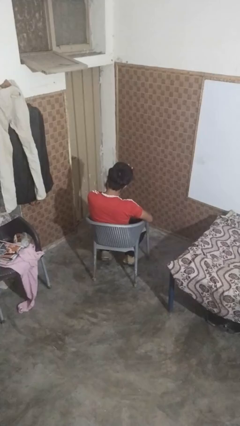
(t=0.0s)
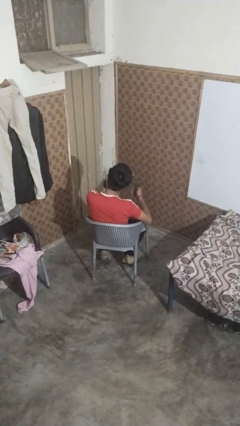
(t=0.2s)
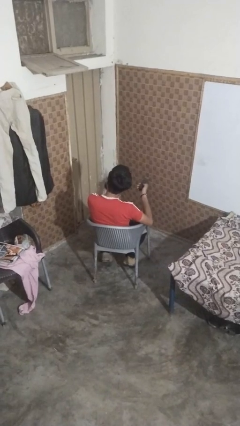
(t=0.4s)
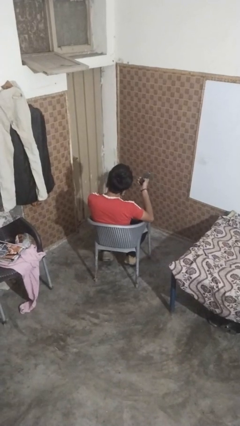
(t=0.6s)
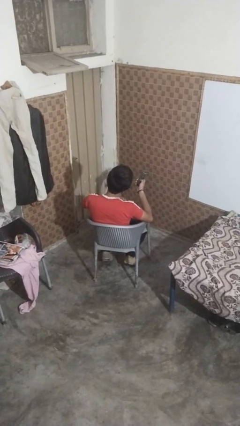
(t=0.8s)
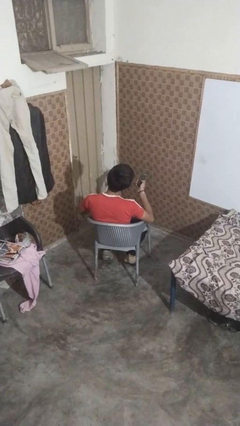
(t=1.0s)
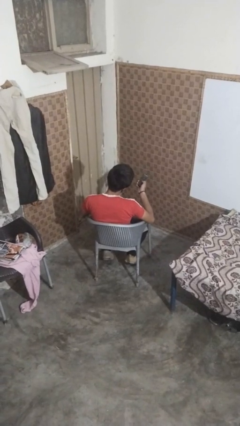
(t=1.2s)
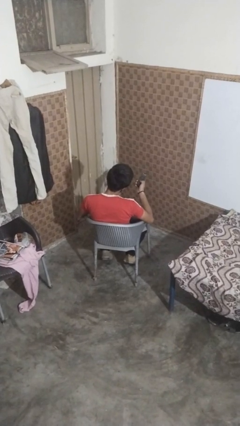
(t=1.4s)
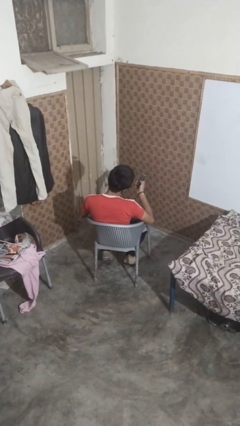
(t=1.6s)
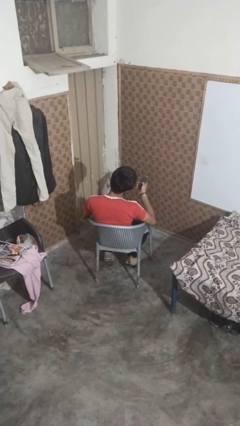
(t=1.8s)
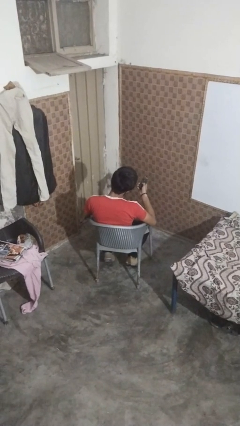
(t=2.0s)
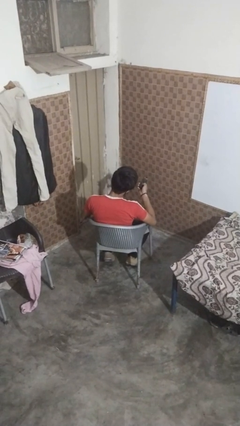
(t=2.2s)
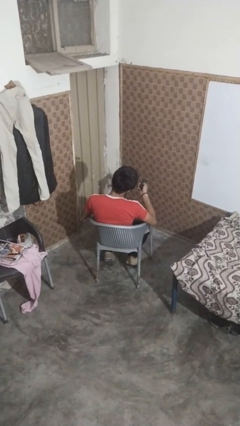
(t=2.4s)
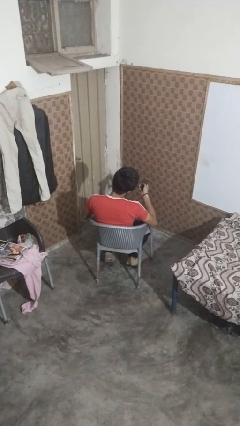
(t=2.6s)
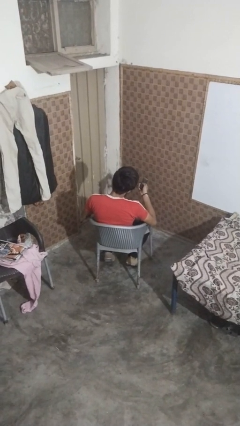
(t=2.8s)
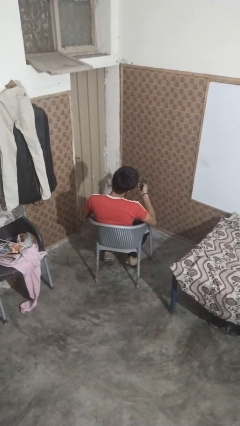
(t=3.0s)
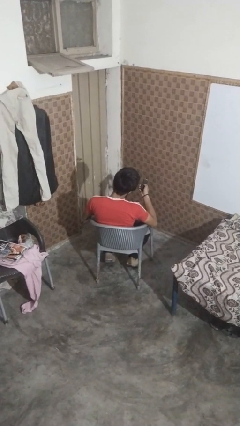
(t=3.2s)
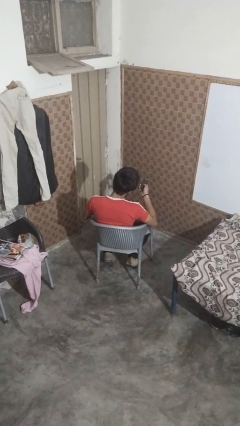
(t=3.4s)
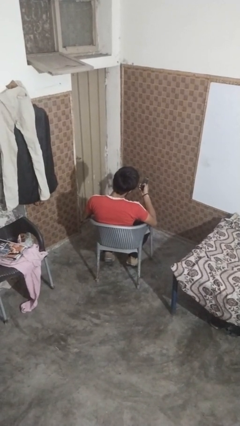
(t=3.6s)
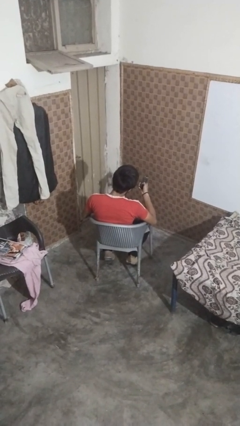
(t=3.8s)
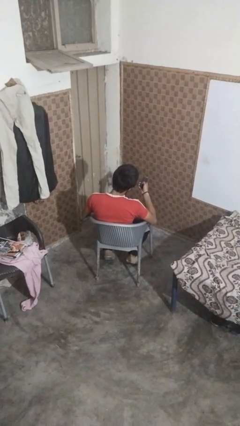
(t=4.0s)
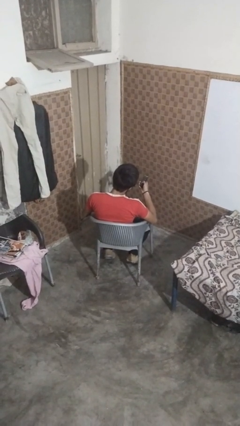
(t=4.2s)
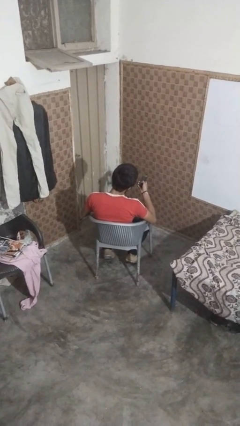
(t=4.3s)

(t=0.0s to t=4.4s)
person uses television remote

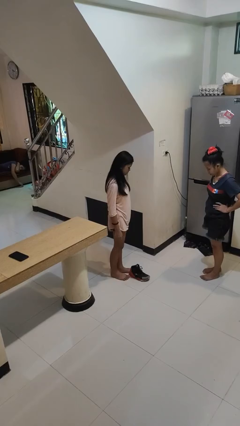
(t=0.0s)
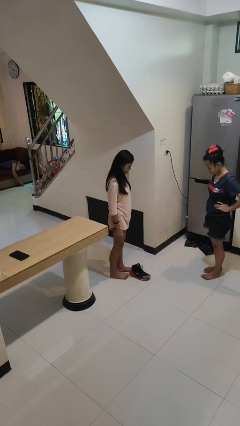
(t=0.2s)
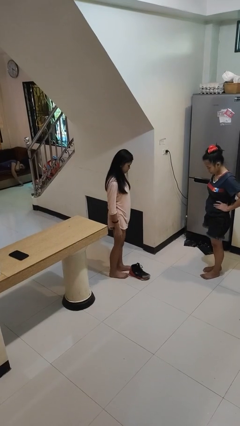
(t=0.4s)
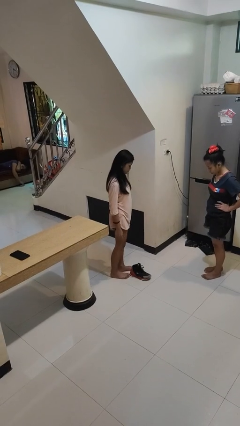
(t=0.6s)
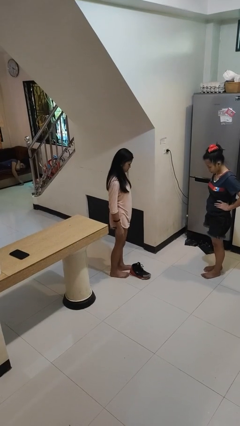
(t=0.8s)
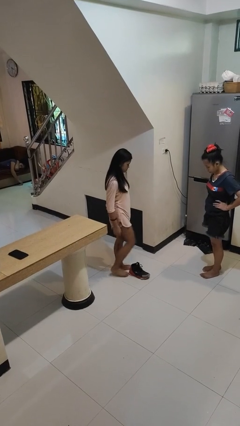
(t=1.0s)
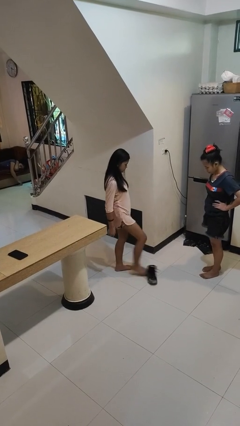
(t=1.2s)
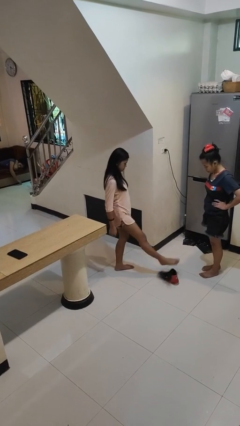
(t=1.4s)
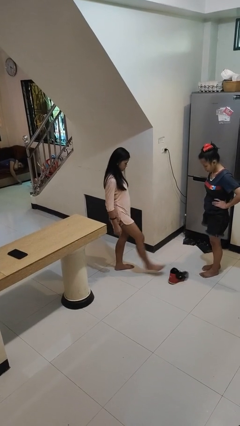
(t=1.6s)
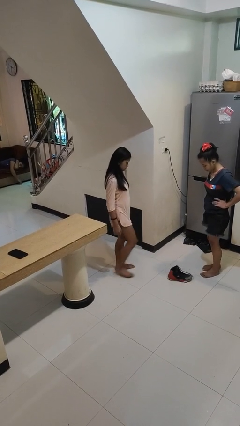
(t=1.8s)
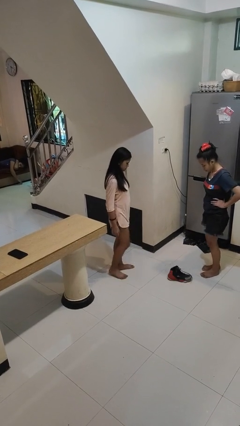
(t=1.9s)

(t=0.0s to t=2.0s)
person kicks object to person

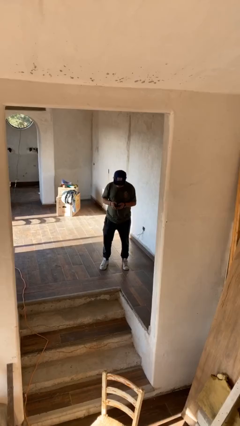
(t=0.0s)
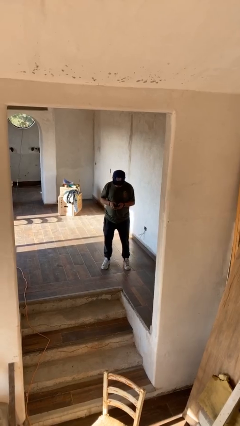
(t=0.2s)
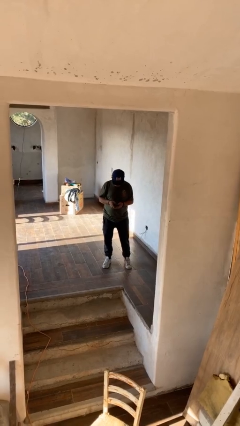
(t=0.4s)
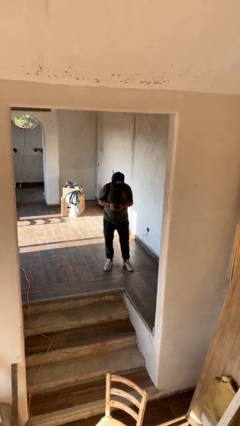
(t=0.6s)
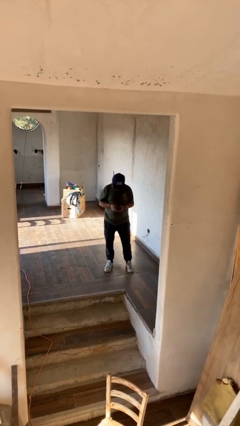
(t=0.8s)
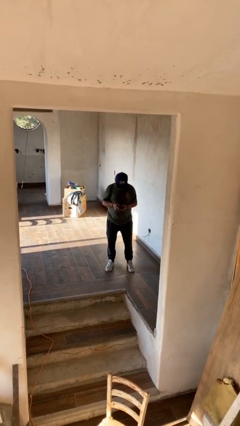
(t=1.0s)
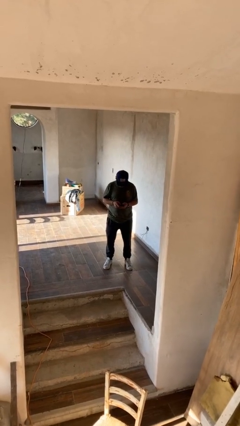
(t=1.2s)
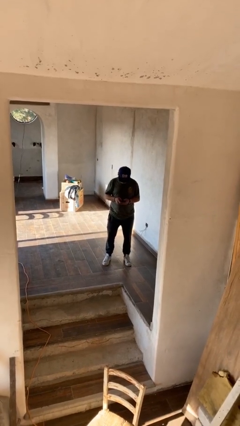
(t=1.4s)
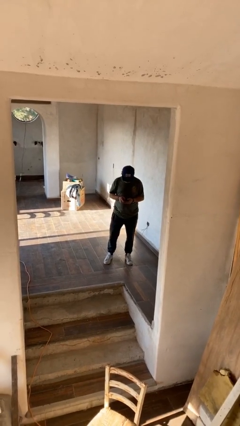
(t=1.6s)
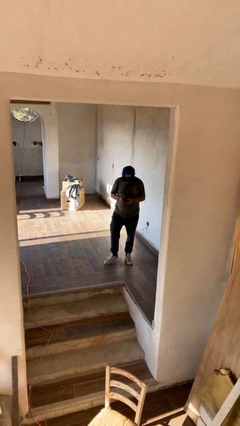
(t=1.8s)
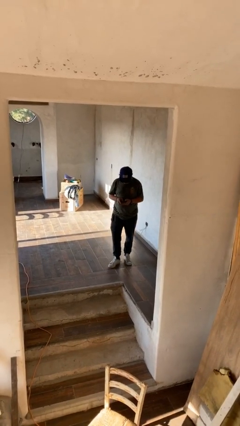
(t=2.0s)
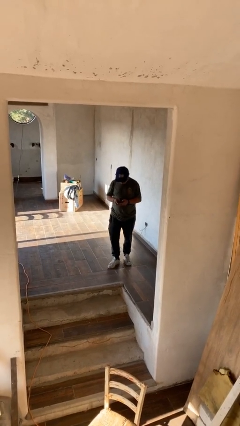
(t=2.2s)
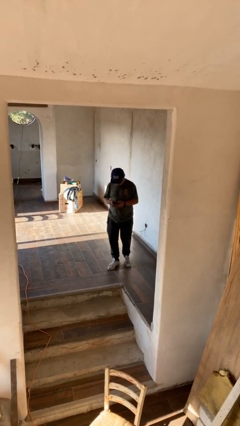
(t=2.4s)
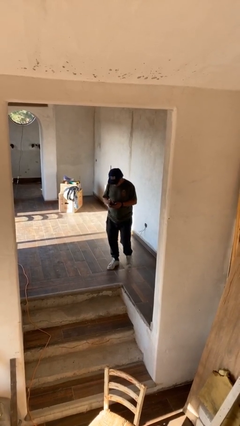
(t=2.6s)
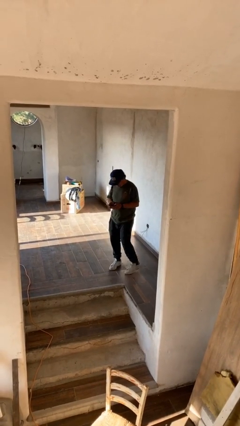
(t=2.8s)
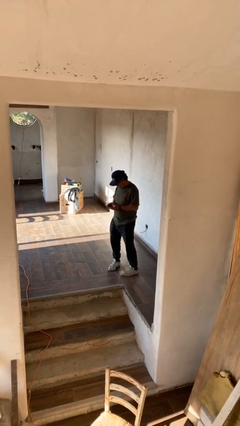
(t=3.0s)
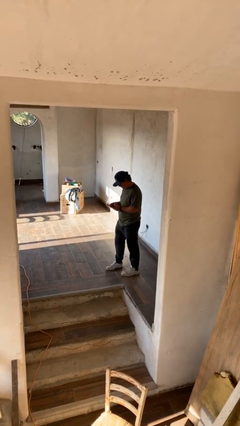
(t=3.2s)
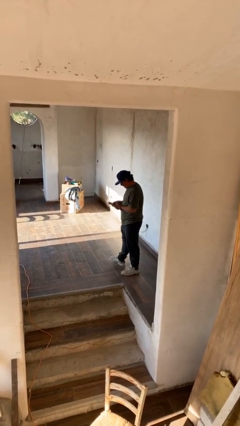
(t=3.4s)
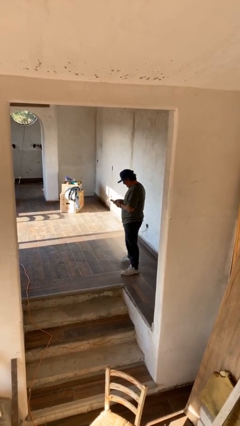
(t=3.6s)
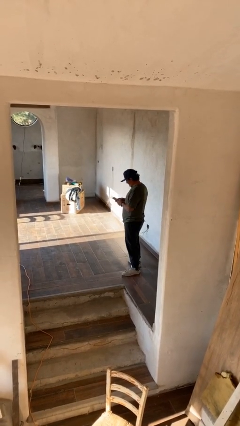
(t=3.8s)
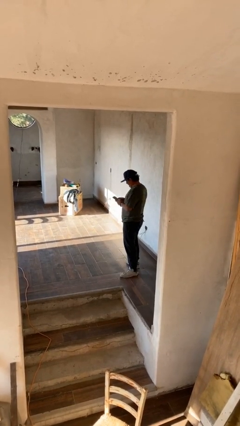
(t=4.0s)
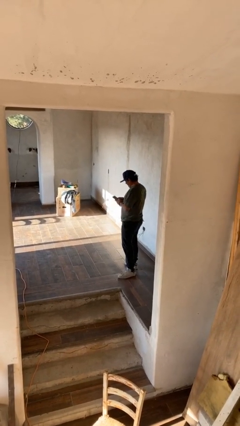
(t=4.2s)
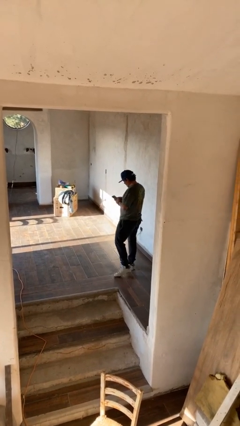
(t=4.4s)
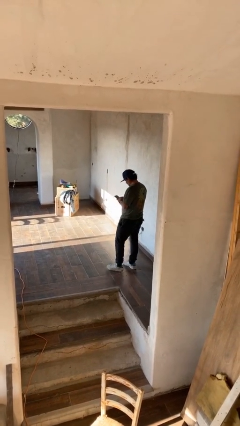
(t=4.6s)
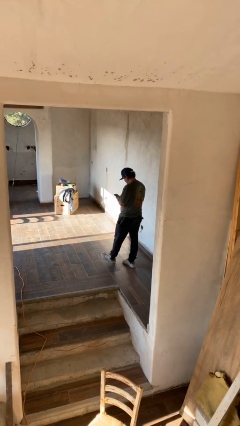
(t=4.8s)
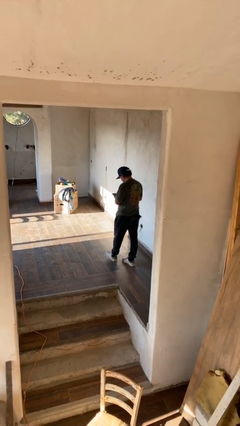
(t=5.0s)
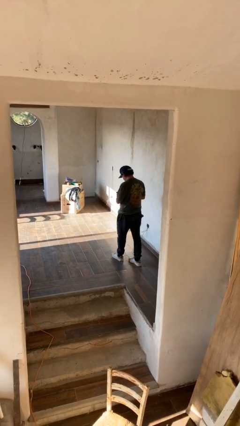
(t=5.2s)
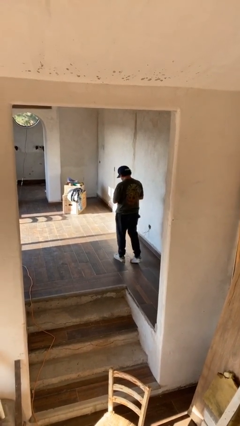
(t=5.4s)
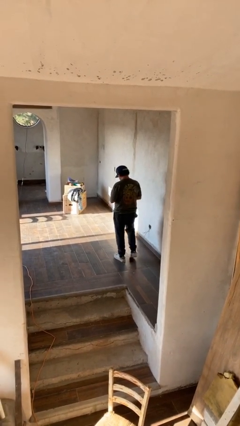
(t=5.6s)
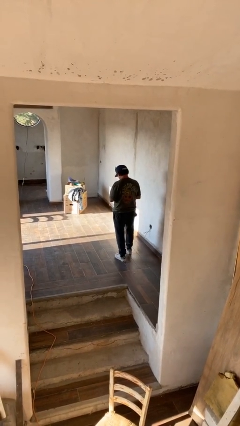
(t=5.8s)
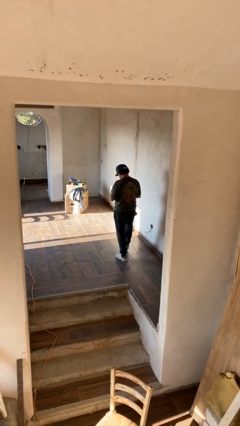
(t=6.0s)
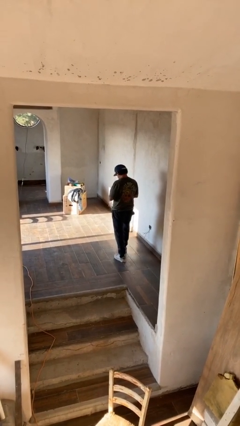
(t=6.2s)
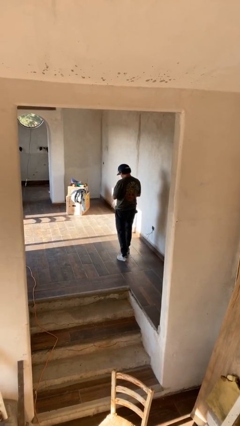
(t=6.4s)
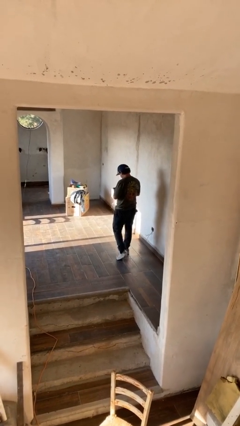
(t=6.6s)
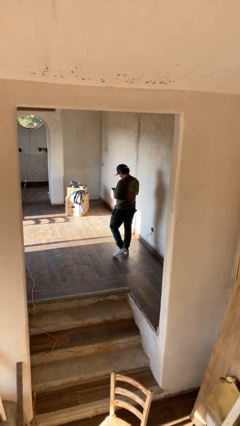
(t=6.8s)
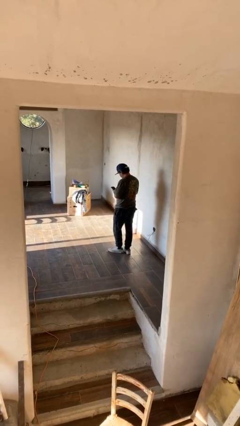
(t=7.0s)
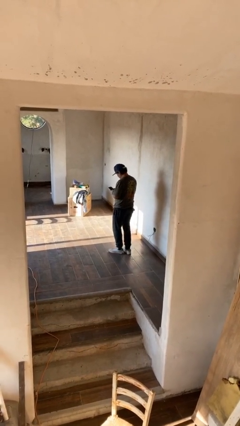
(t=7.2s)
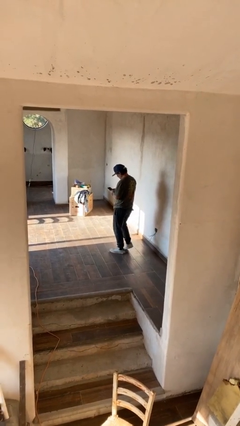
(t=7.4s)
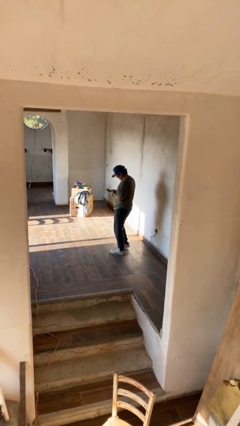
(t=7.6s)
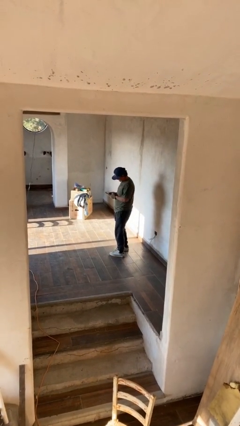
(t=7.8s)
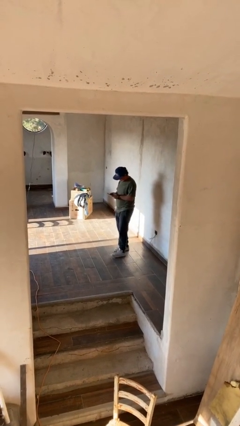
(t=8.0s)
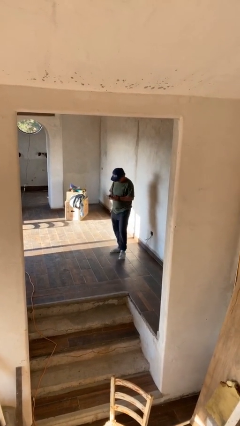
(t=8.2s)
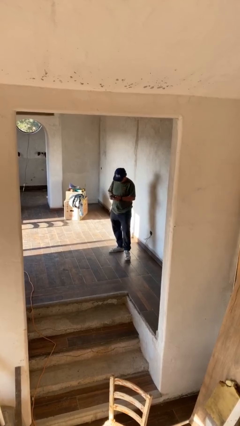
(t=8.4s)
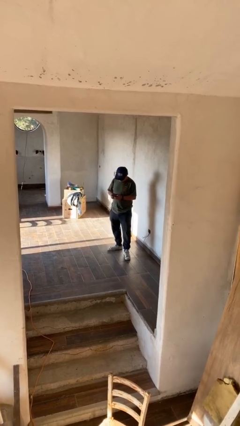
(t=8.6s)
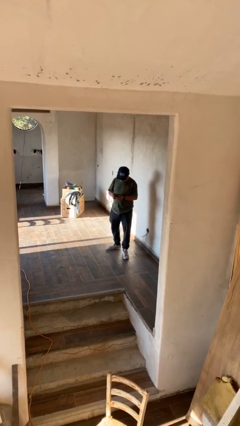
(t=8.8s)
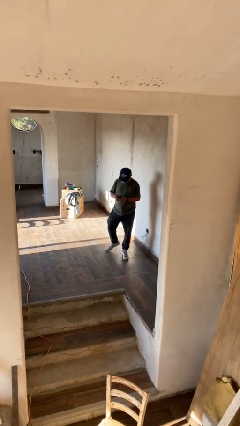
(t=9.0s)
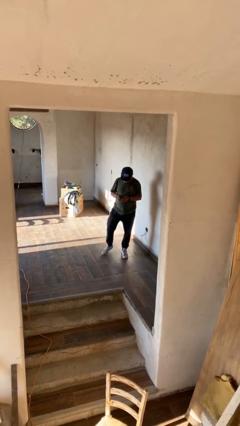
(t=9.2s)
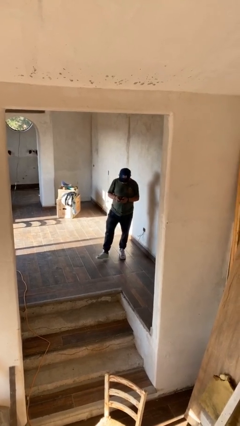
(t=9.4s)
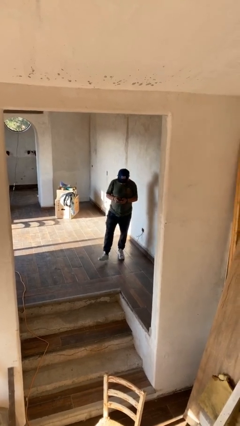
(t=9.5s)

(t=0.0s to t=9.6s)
person texts on phone

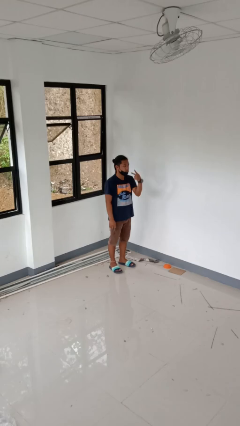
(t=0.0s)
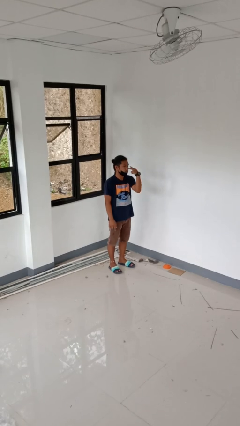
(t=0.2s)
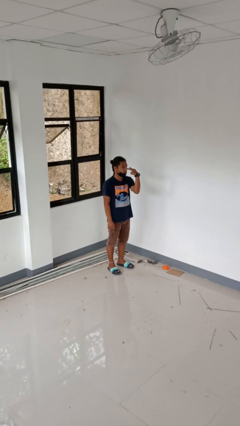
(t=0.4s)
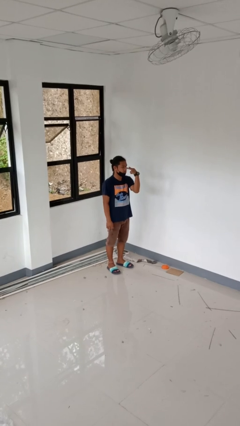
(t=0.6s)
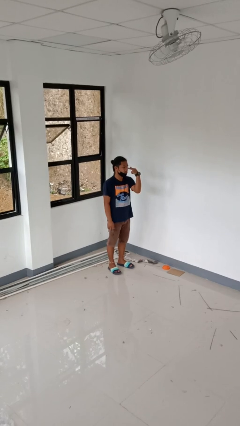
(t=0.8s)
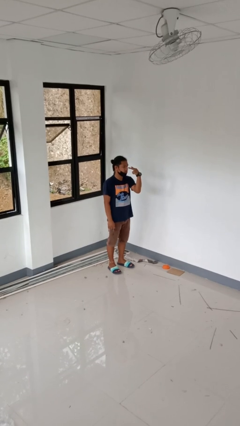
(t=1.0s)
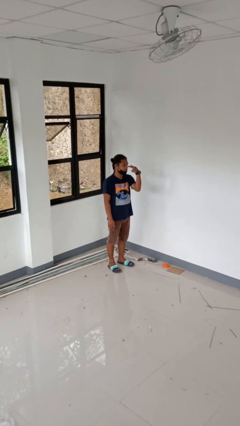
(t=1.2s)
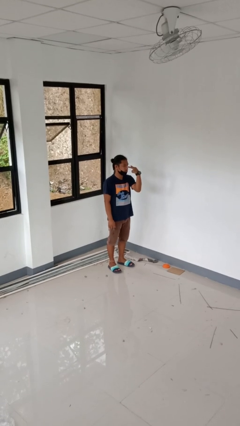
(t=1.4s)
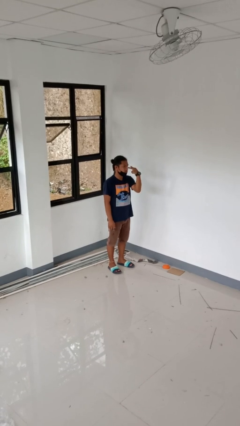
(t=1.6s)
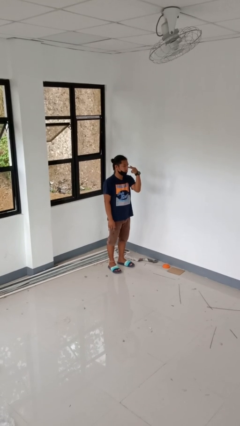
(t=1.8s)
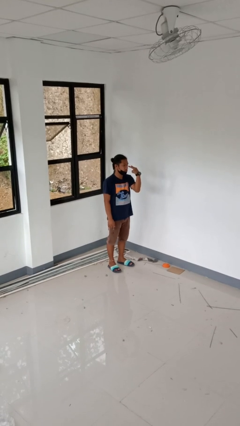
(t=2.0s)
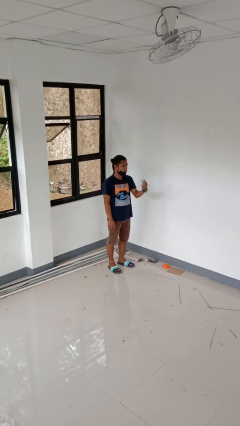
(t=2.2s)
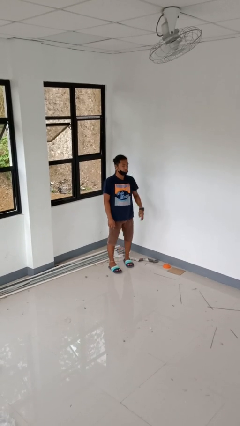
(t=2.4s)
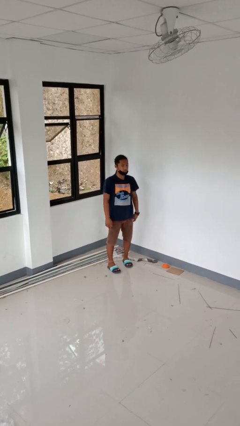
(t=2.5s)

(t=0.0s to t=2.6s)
person gestures watch closely
